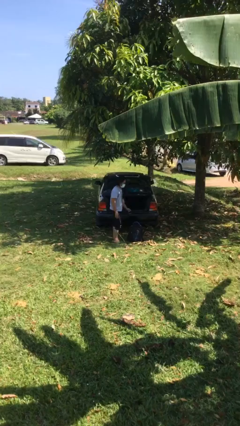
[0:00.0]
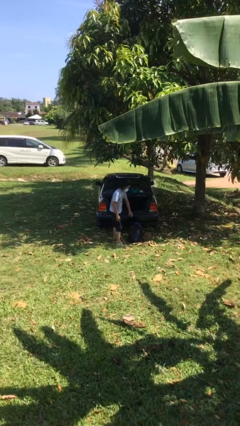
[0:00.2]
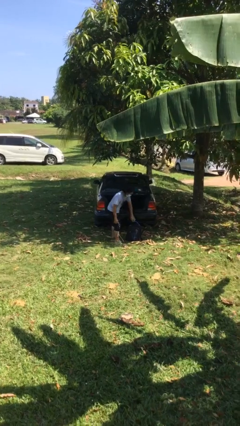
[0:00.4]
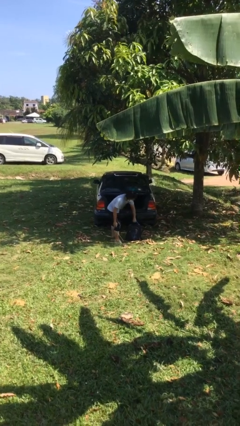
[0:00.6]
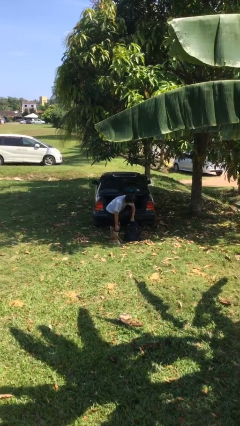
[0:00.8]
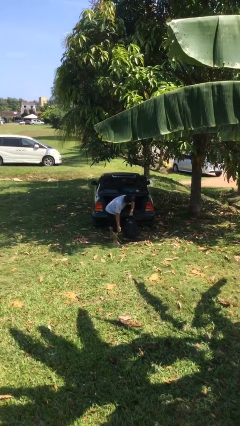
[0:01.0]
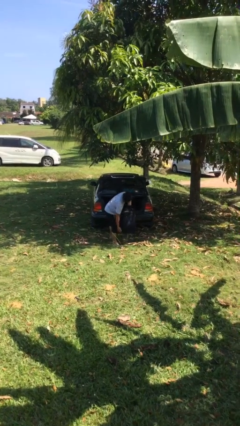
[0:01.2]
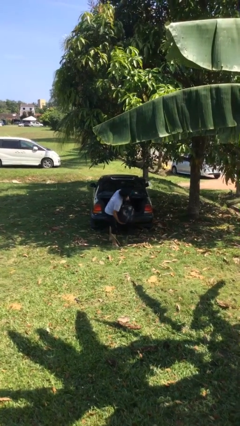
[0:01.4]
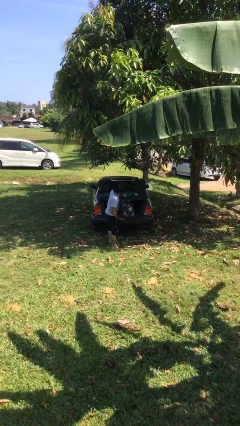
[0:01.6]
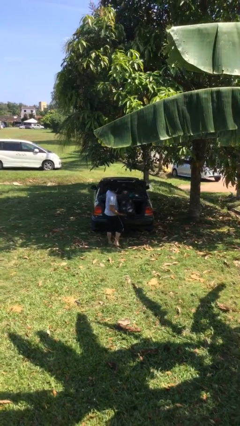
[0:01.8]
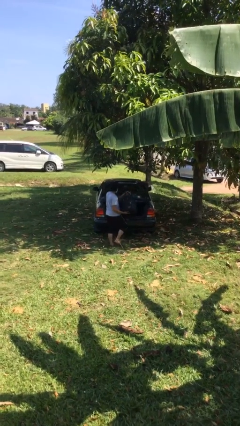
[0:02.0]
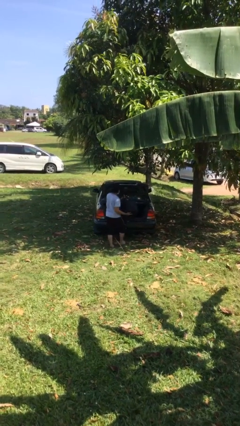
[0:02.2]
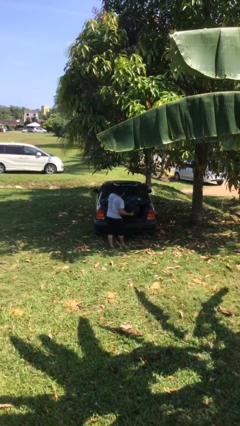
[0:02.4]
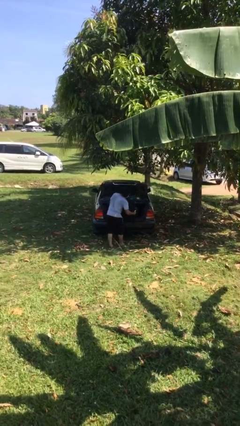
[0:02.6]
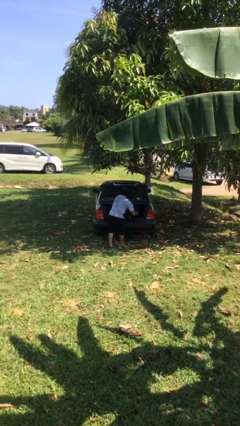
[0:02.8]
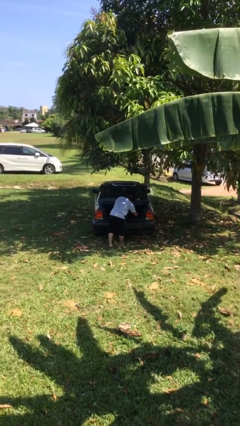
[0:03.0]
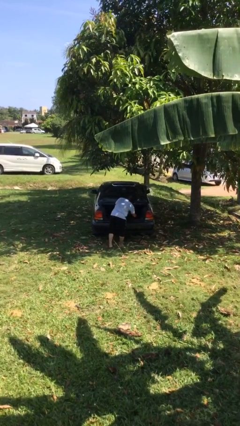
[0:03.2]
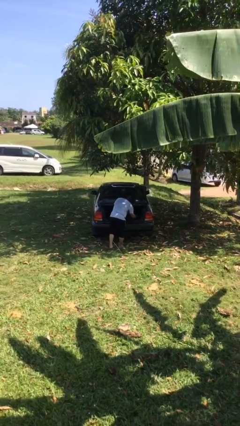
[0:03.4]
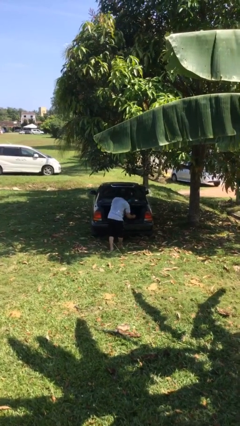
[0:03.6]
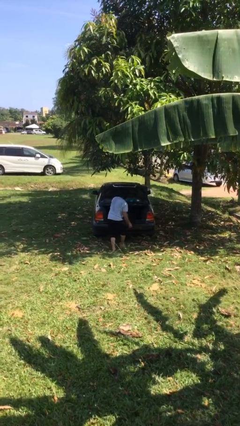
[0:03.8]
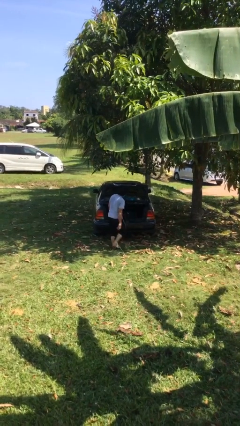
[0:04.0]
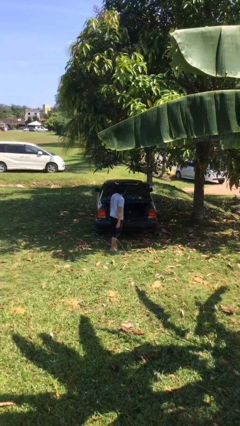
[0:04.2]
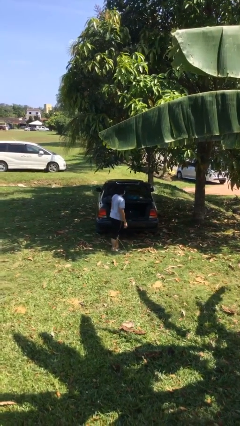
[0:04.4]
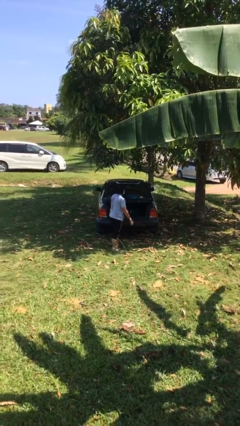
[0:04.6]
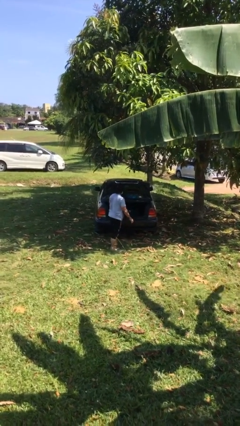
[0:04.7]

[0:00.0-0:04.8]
person loads car

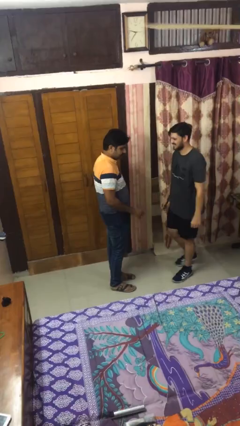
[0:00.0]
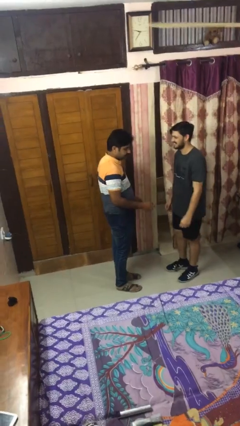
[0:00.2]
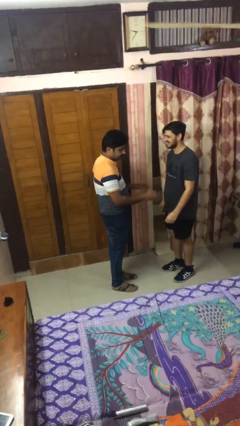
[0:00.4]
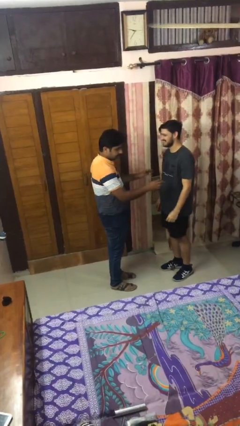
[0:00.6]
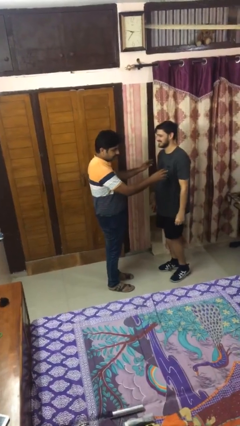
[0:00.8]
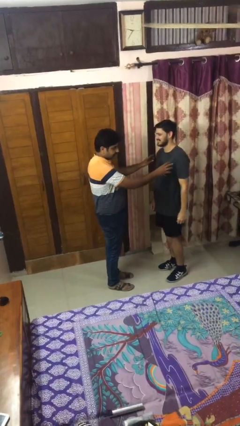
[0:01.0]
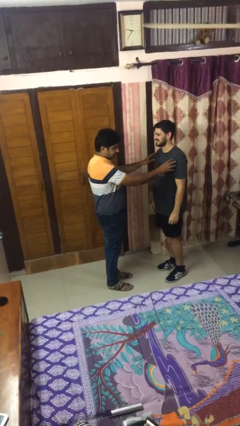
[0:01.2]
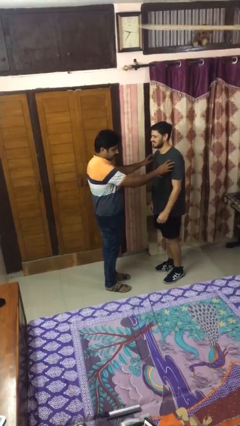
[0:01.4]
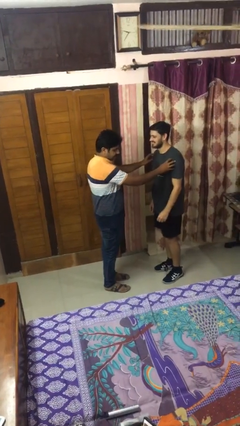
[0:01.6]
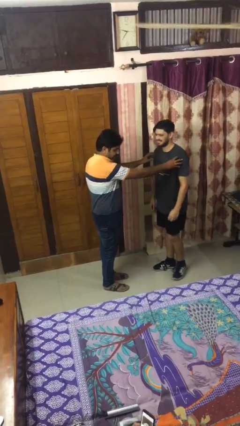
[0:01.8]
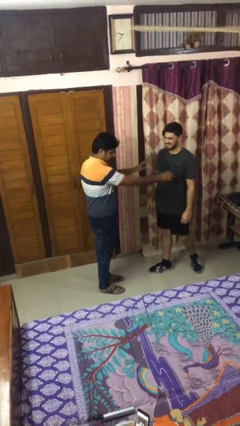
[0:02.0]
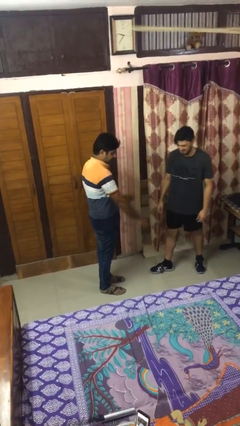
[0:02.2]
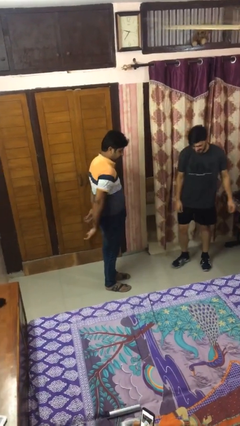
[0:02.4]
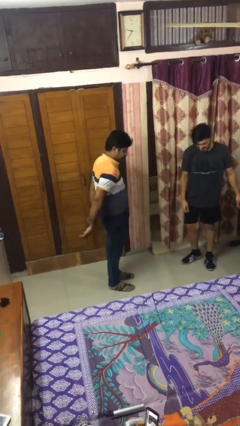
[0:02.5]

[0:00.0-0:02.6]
person shoves person

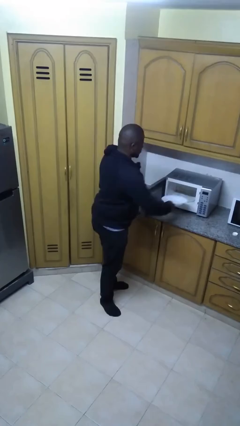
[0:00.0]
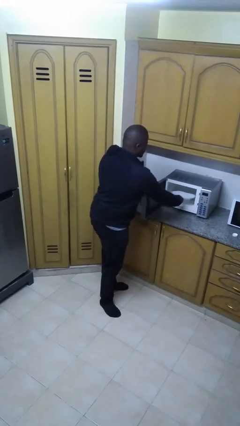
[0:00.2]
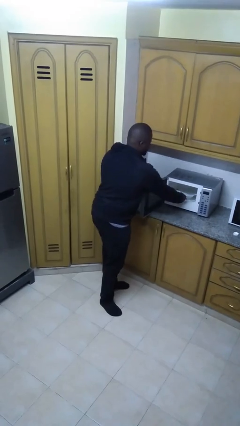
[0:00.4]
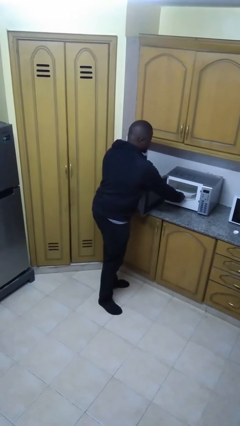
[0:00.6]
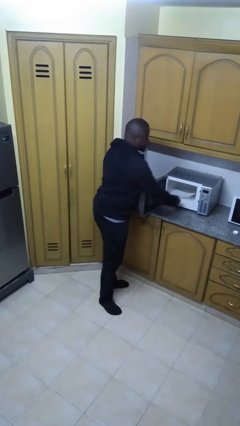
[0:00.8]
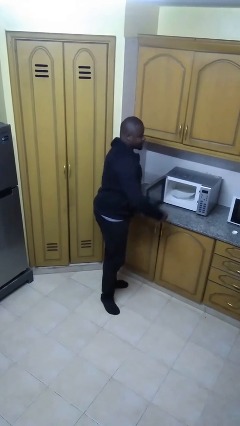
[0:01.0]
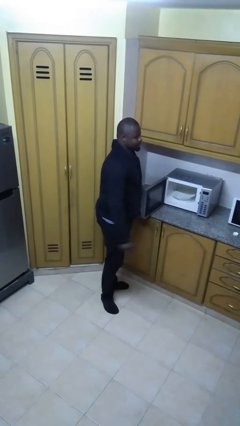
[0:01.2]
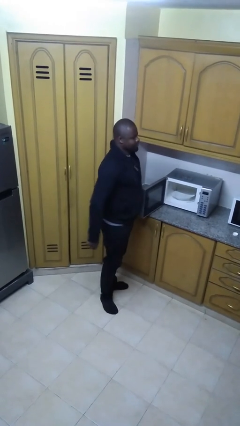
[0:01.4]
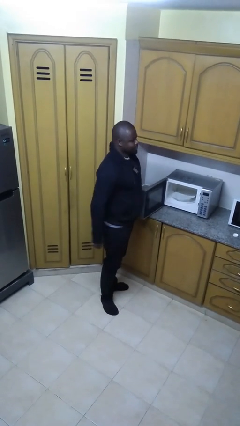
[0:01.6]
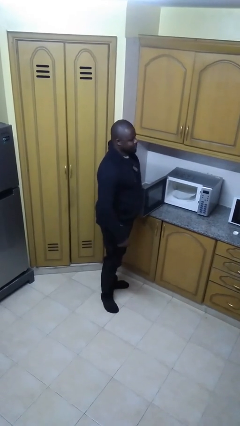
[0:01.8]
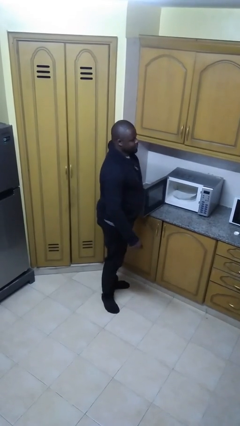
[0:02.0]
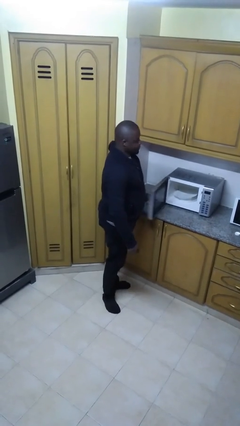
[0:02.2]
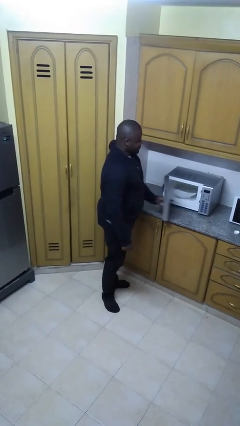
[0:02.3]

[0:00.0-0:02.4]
person puts object into microwave

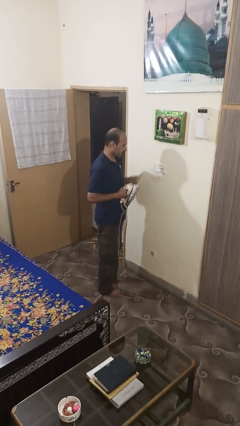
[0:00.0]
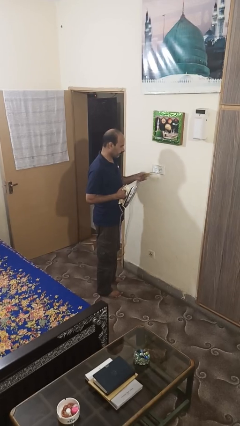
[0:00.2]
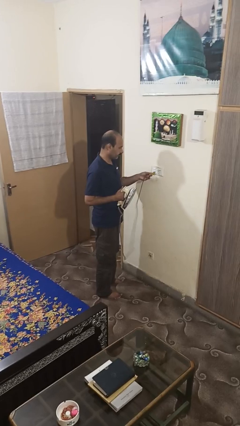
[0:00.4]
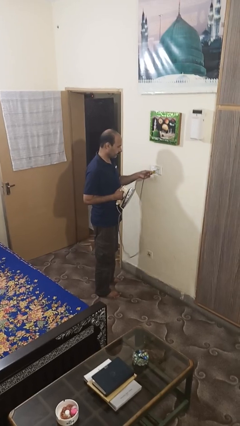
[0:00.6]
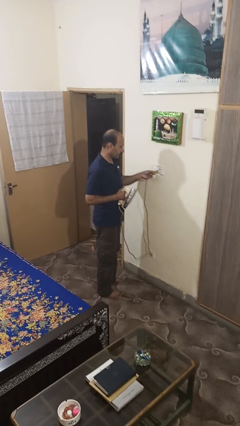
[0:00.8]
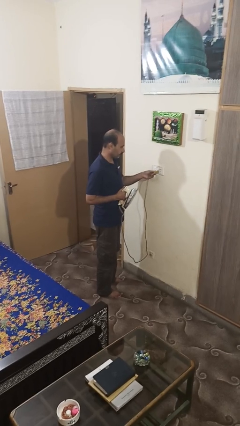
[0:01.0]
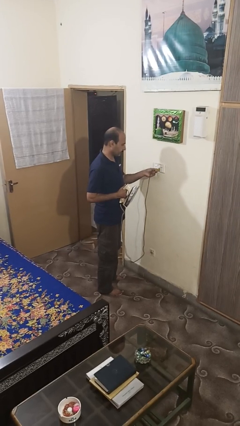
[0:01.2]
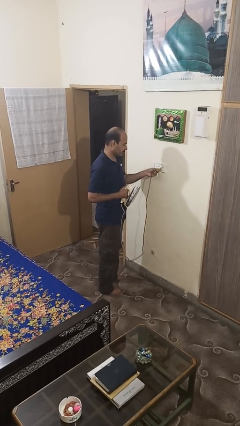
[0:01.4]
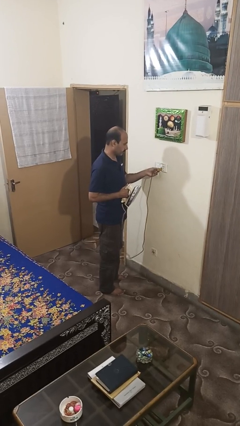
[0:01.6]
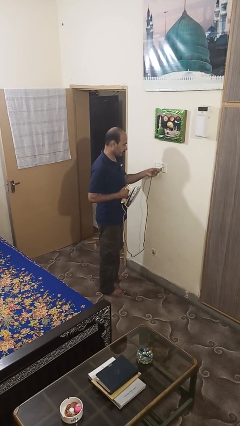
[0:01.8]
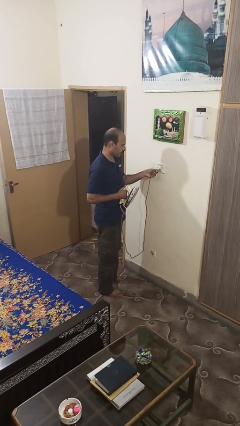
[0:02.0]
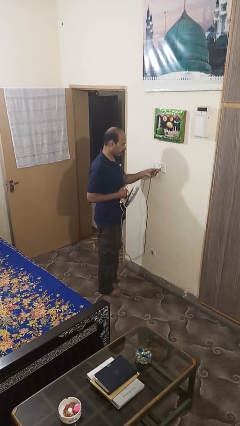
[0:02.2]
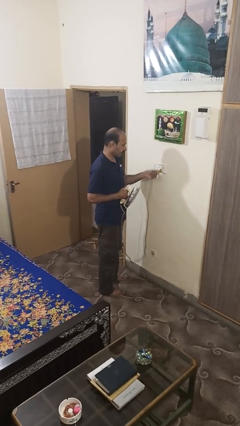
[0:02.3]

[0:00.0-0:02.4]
person plugs into electrical socket

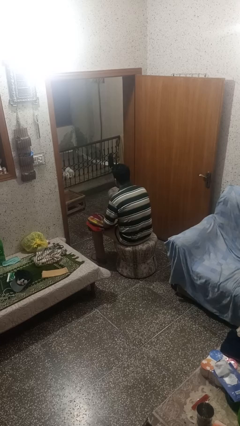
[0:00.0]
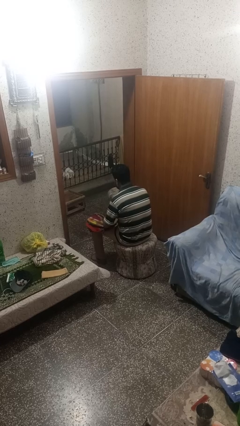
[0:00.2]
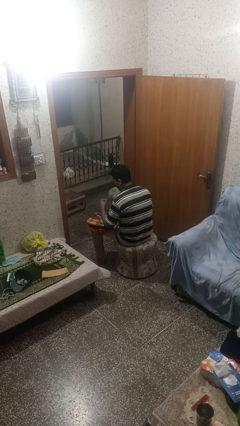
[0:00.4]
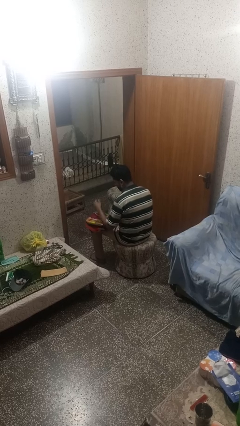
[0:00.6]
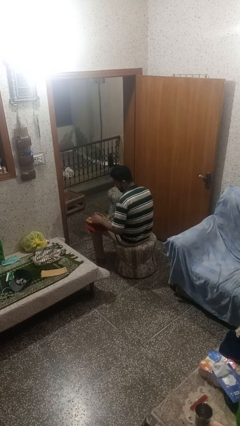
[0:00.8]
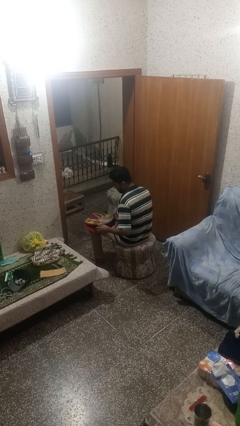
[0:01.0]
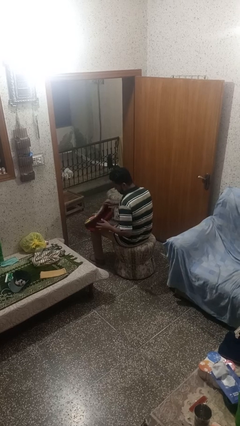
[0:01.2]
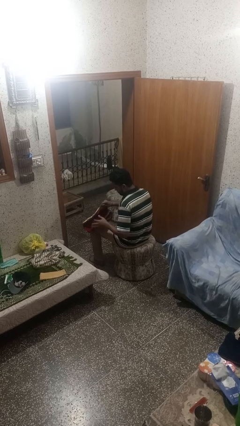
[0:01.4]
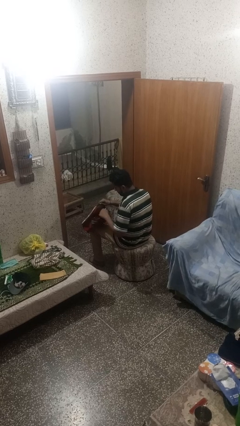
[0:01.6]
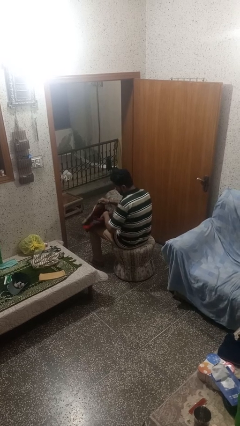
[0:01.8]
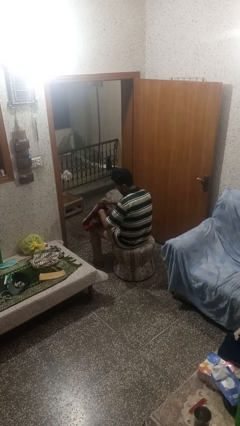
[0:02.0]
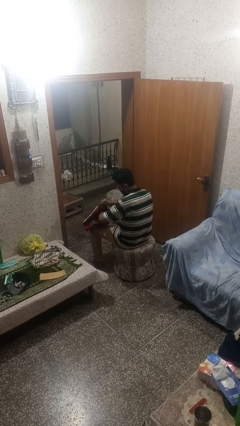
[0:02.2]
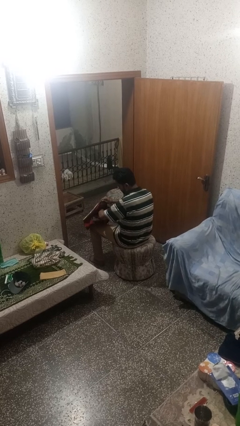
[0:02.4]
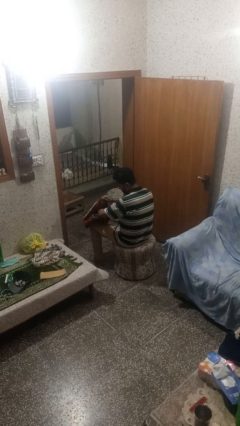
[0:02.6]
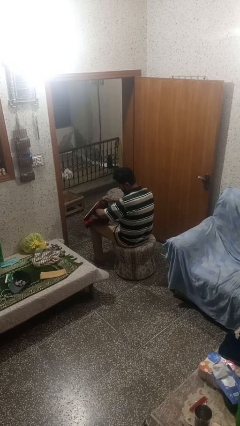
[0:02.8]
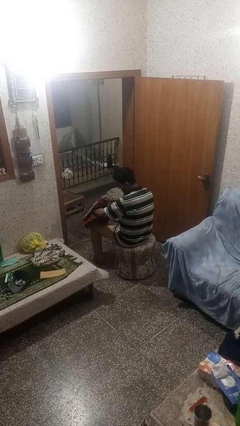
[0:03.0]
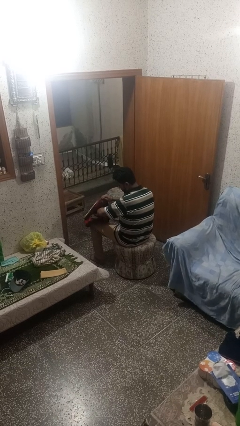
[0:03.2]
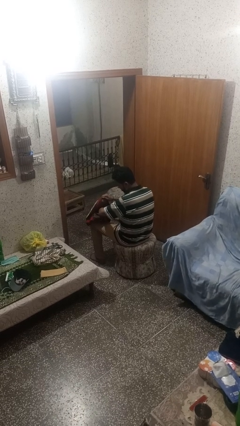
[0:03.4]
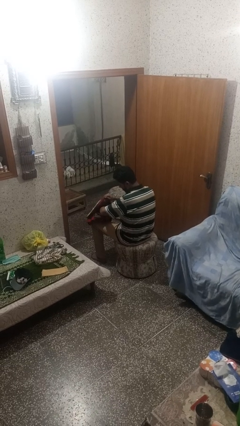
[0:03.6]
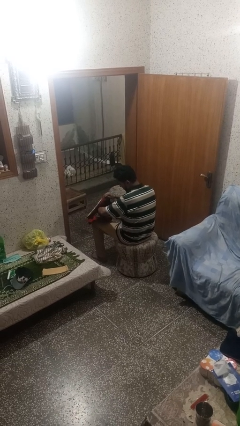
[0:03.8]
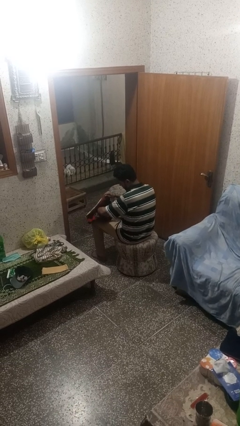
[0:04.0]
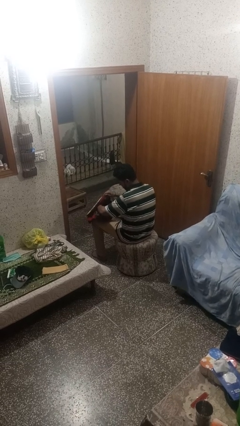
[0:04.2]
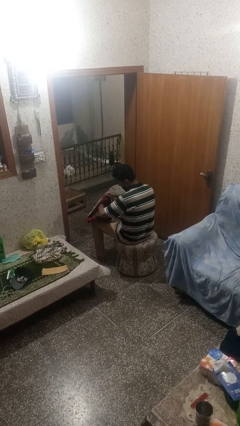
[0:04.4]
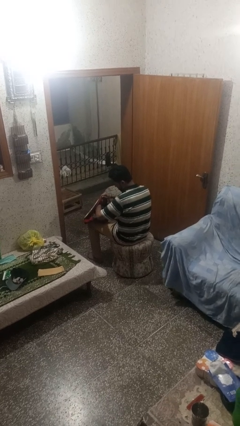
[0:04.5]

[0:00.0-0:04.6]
person searches in backpack

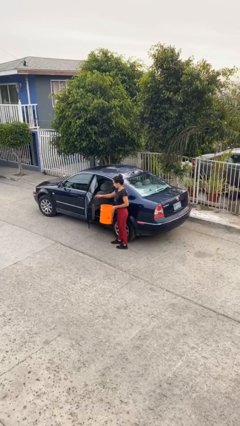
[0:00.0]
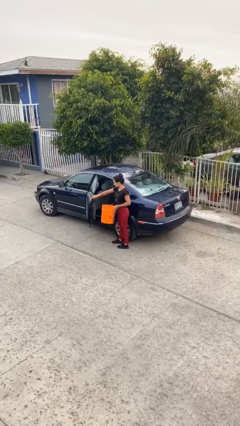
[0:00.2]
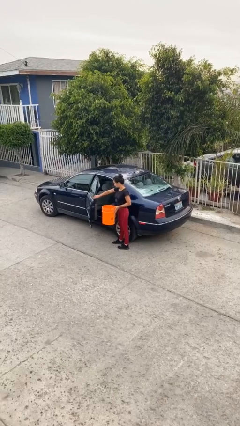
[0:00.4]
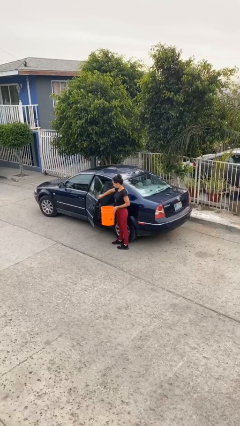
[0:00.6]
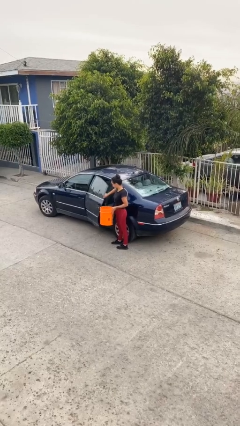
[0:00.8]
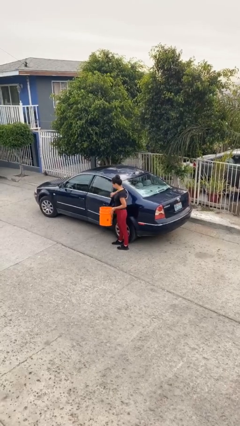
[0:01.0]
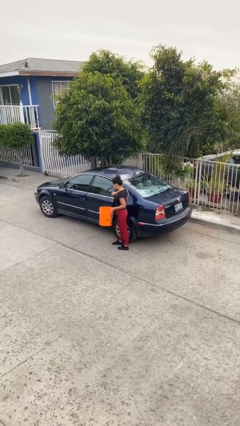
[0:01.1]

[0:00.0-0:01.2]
person closes car door
